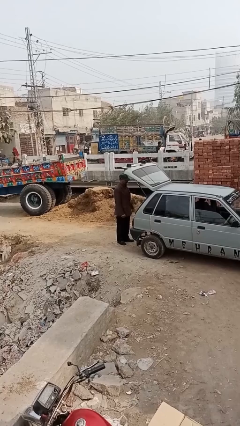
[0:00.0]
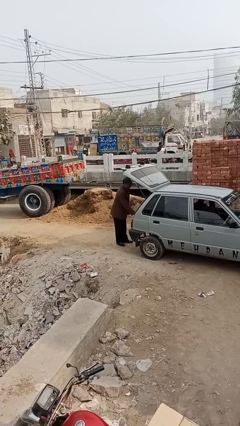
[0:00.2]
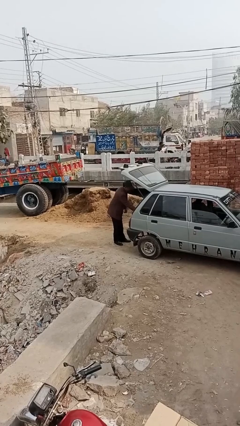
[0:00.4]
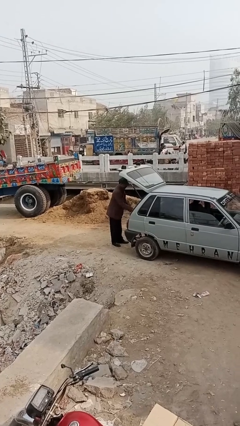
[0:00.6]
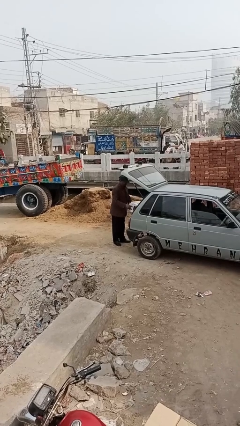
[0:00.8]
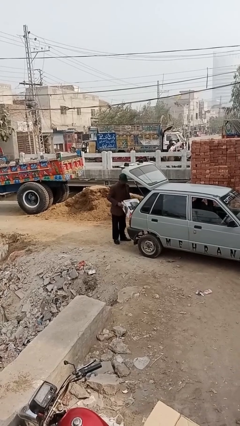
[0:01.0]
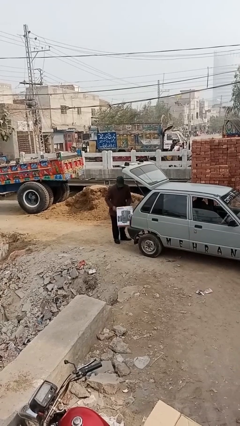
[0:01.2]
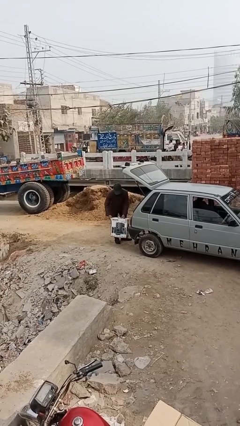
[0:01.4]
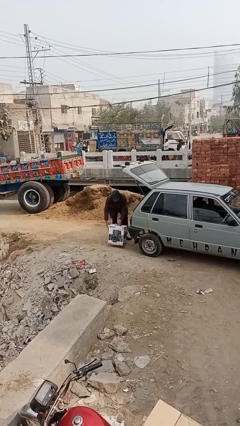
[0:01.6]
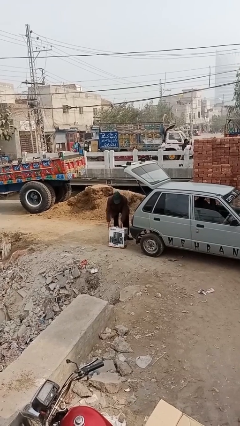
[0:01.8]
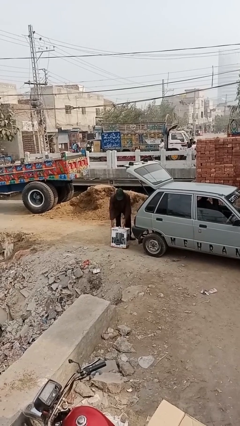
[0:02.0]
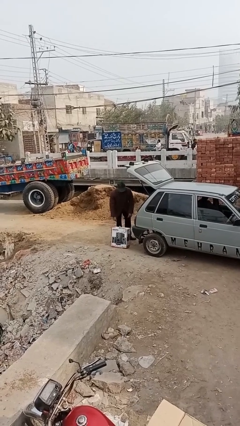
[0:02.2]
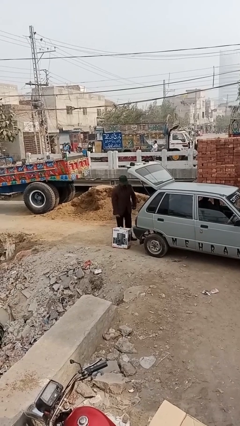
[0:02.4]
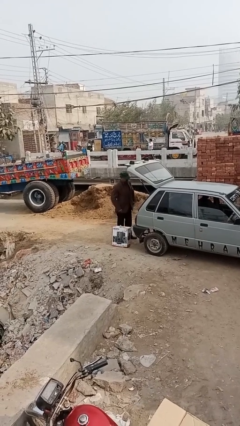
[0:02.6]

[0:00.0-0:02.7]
person unloads car

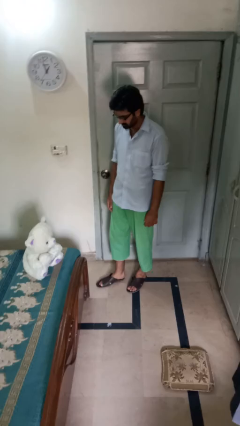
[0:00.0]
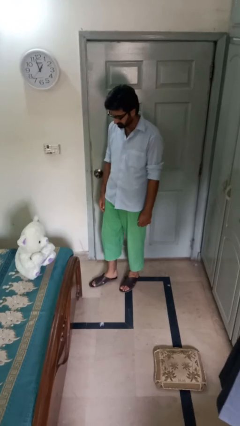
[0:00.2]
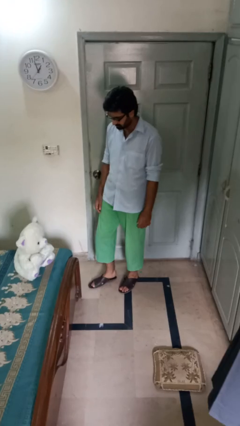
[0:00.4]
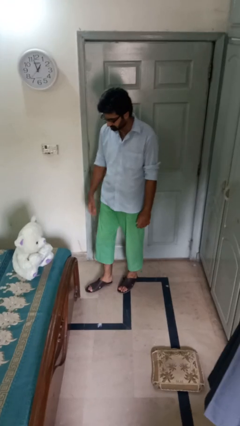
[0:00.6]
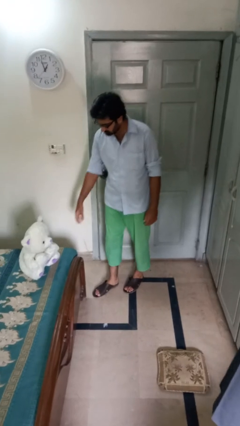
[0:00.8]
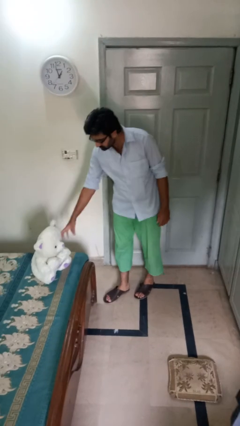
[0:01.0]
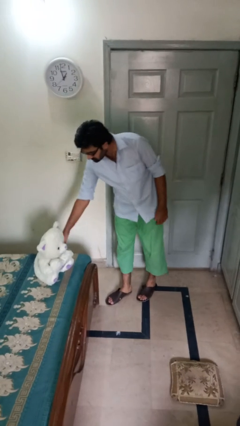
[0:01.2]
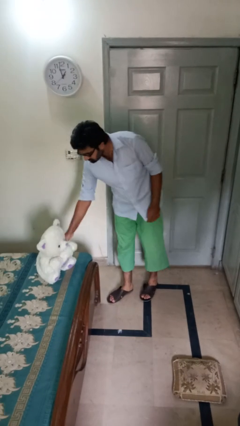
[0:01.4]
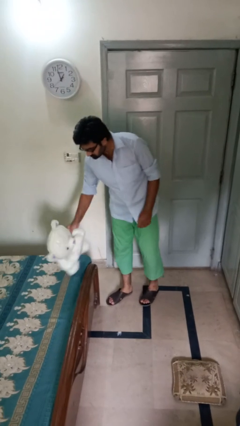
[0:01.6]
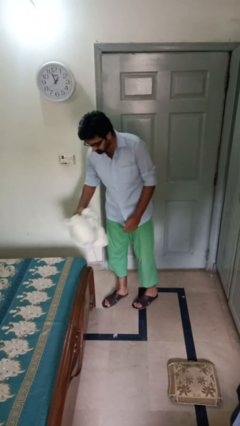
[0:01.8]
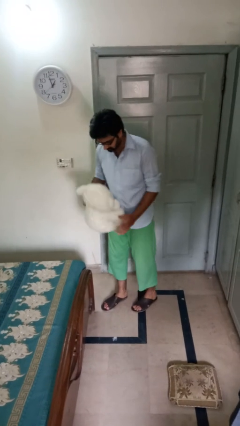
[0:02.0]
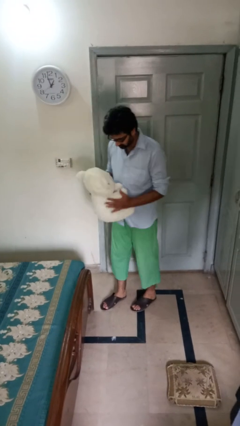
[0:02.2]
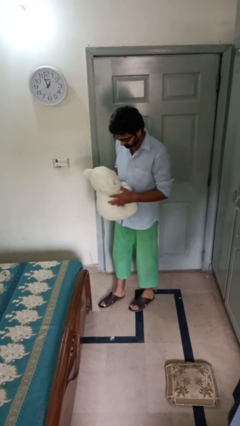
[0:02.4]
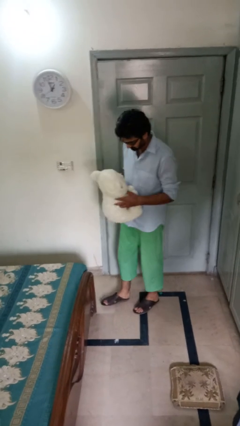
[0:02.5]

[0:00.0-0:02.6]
person picks up object from bed

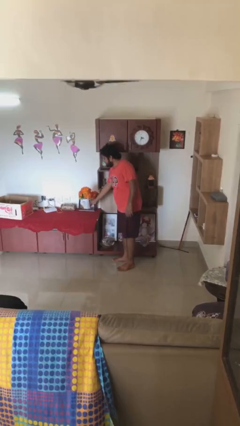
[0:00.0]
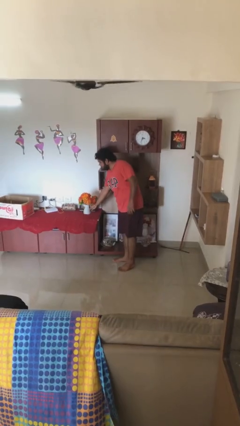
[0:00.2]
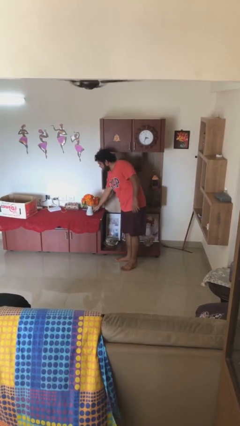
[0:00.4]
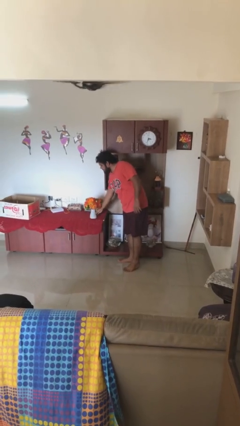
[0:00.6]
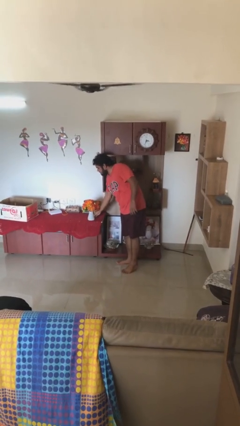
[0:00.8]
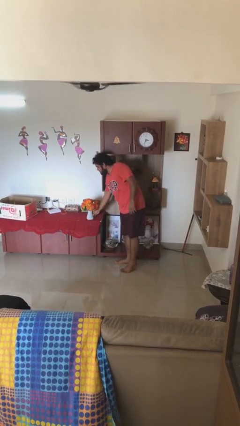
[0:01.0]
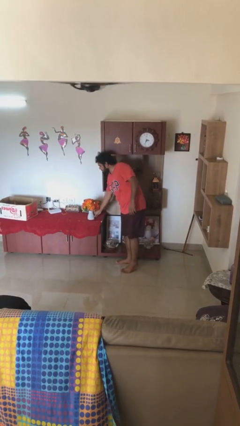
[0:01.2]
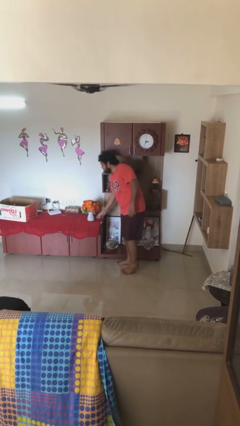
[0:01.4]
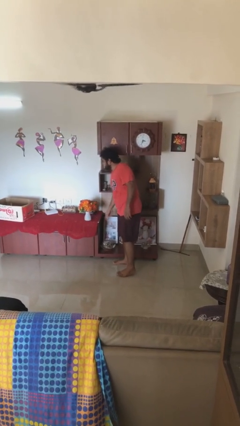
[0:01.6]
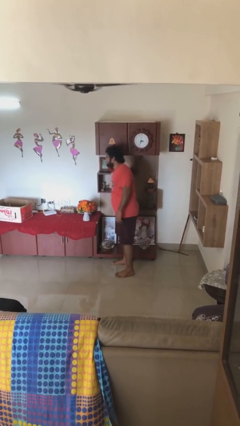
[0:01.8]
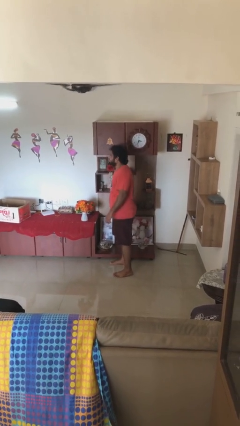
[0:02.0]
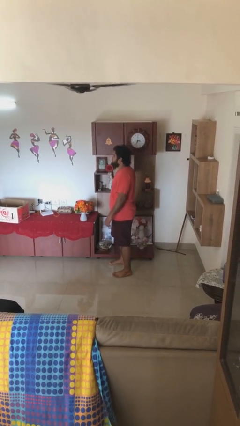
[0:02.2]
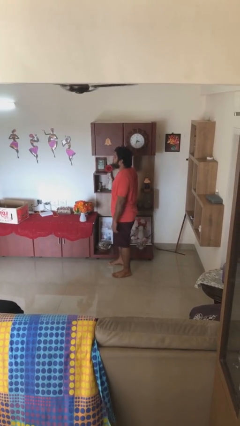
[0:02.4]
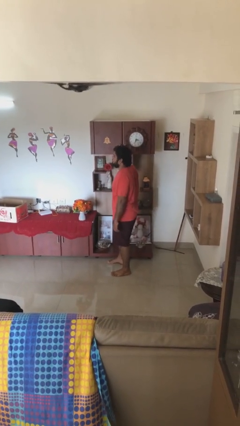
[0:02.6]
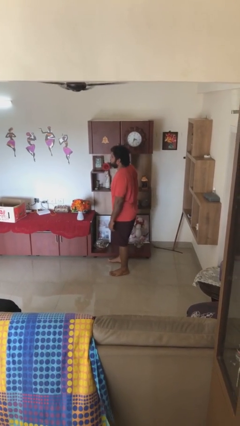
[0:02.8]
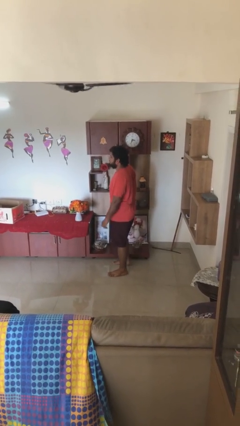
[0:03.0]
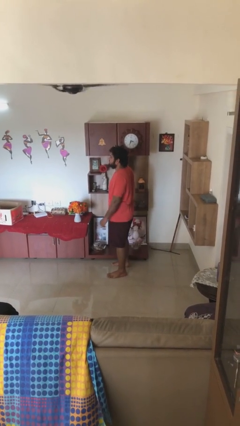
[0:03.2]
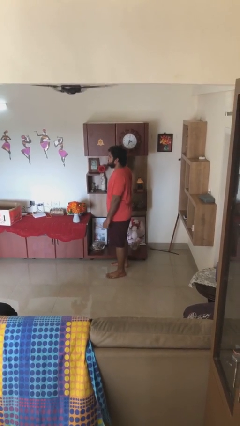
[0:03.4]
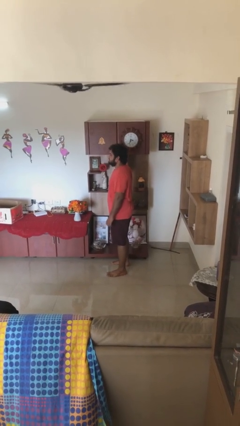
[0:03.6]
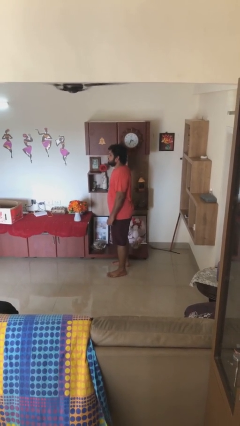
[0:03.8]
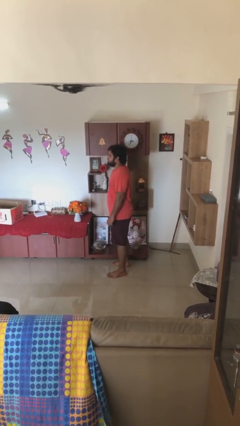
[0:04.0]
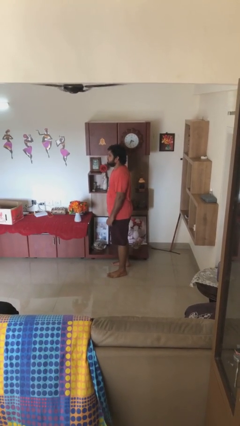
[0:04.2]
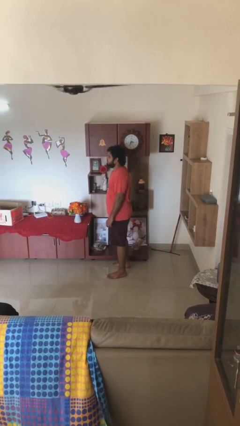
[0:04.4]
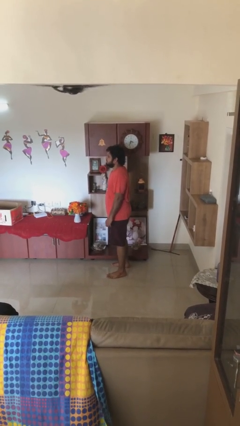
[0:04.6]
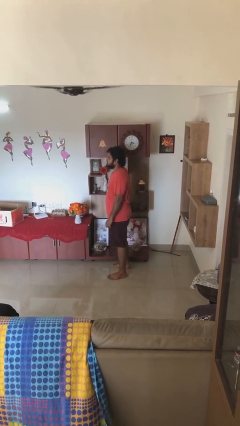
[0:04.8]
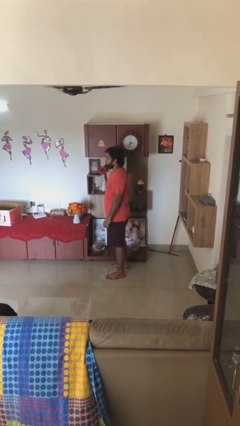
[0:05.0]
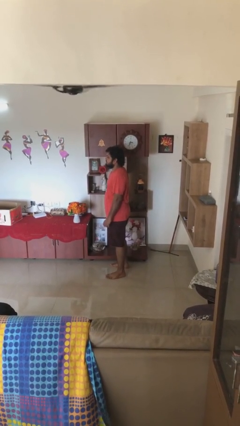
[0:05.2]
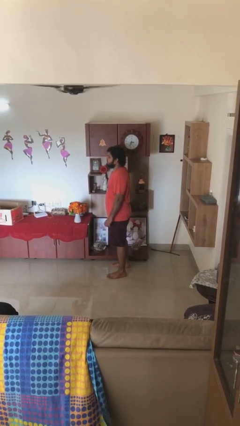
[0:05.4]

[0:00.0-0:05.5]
person puts down object on table

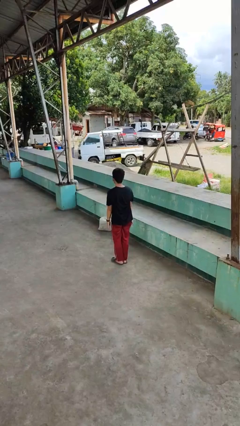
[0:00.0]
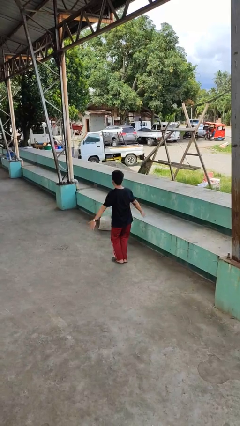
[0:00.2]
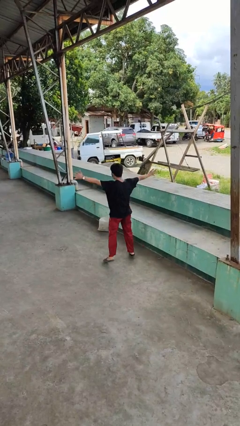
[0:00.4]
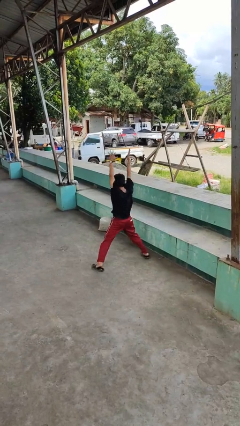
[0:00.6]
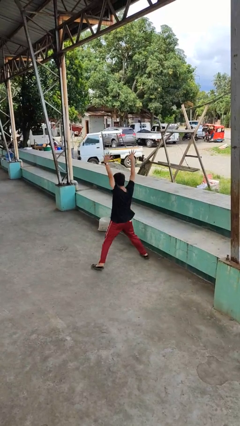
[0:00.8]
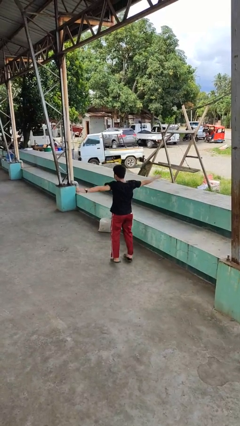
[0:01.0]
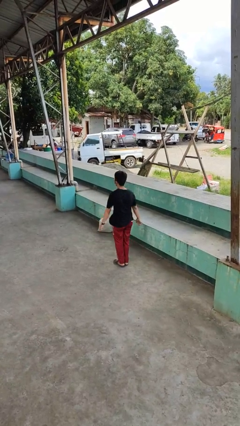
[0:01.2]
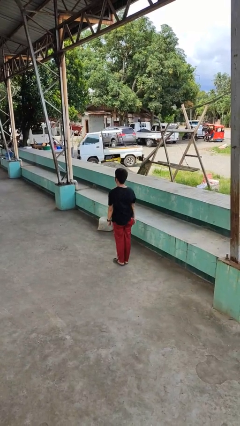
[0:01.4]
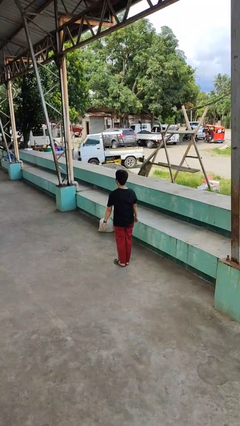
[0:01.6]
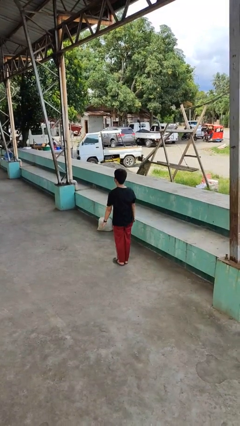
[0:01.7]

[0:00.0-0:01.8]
person exercises with jumping jacks

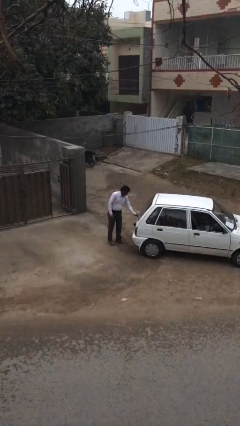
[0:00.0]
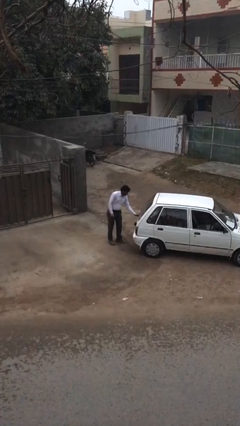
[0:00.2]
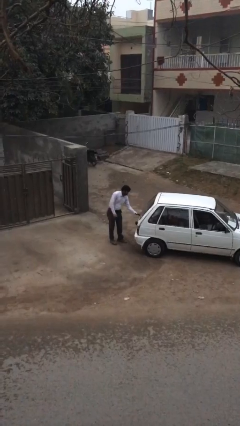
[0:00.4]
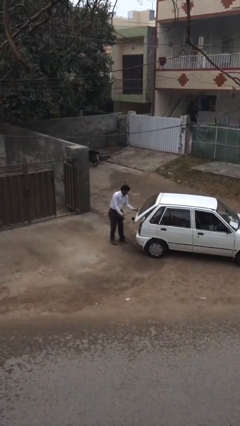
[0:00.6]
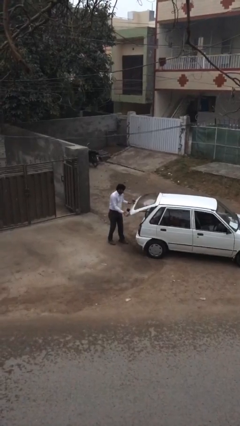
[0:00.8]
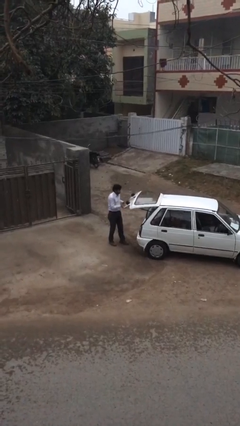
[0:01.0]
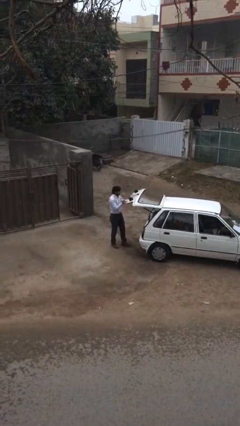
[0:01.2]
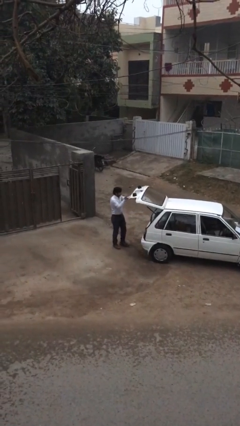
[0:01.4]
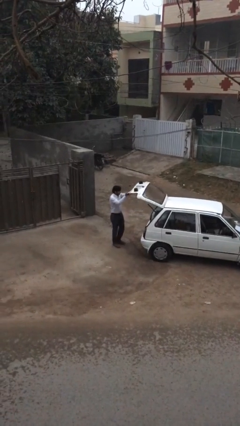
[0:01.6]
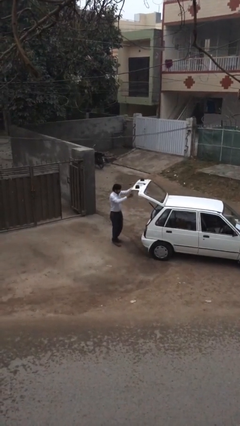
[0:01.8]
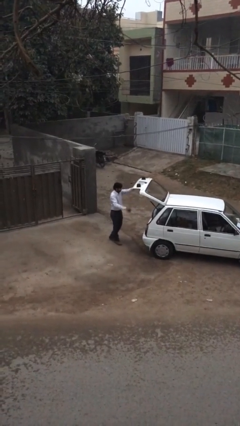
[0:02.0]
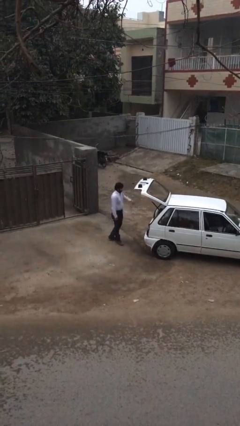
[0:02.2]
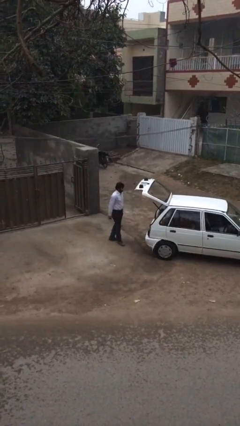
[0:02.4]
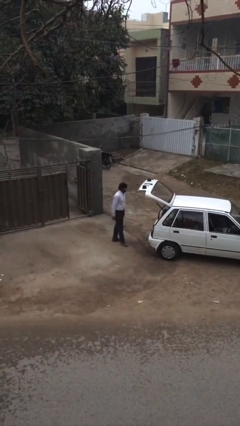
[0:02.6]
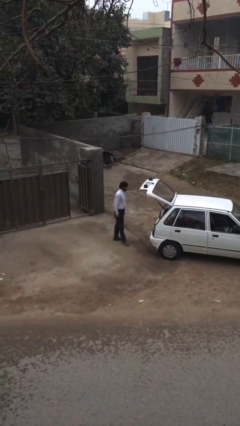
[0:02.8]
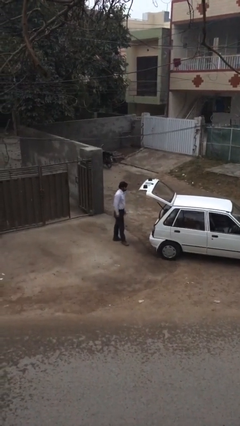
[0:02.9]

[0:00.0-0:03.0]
person opens car trunk

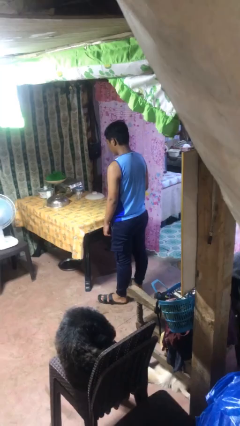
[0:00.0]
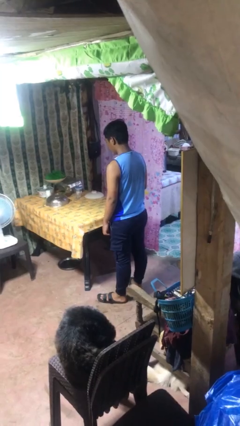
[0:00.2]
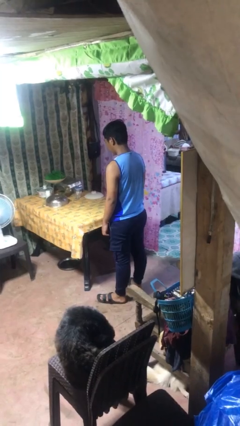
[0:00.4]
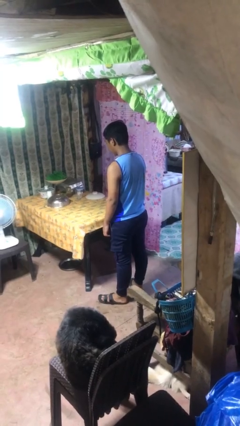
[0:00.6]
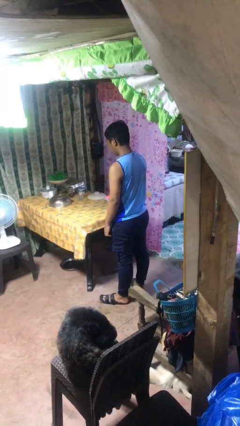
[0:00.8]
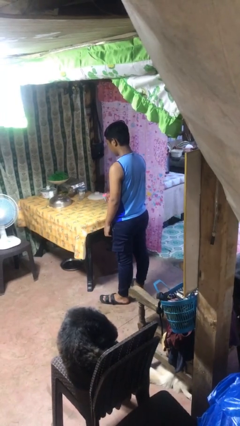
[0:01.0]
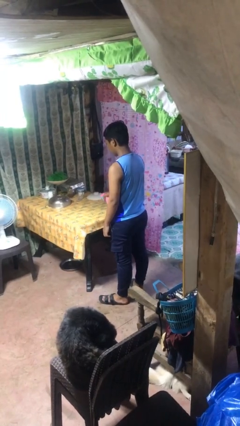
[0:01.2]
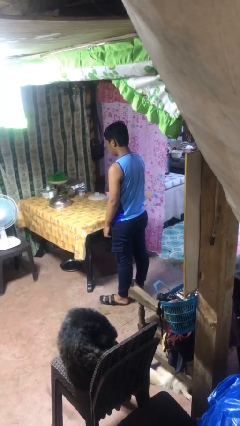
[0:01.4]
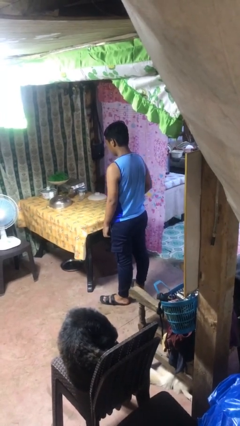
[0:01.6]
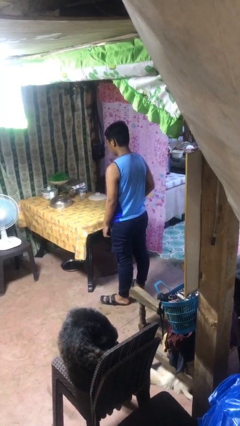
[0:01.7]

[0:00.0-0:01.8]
person sprays from bottle

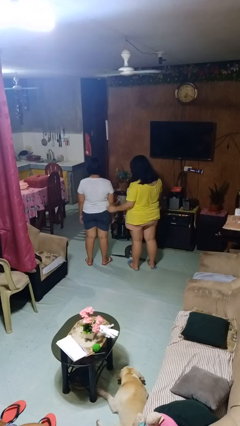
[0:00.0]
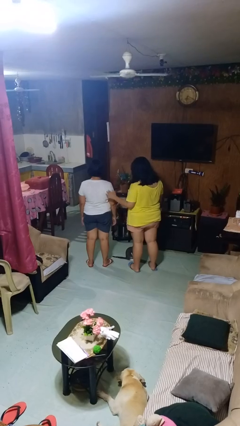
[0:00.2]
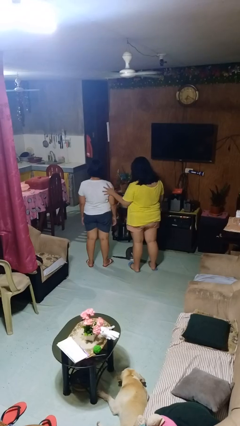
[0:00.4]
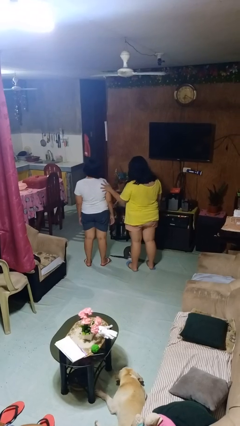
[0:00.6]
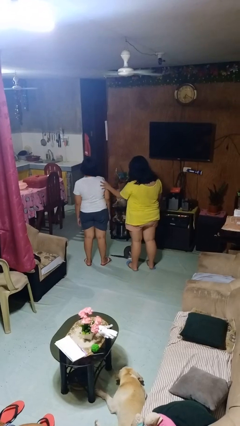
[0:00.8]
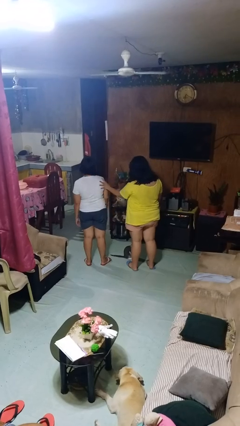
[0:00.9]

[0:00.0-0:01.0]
person shoves person
